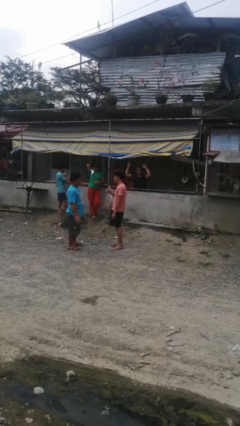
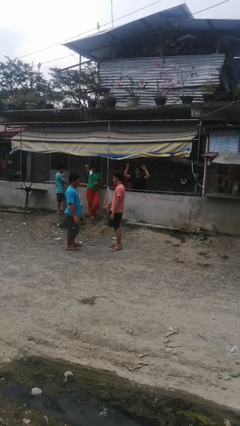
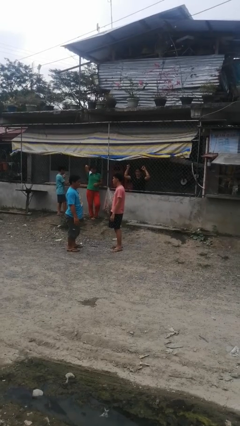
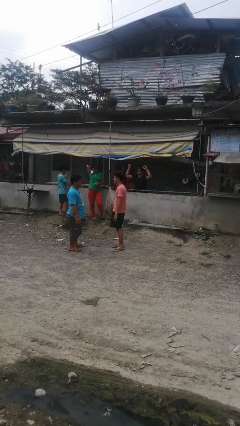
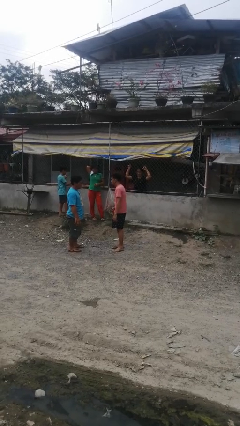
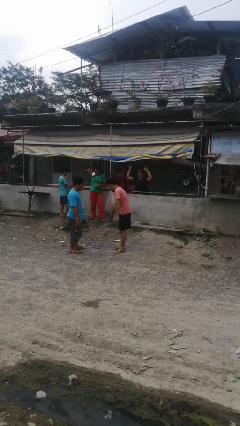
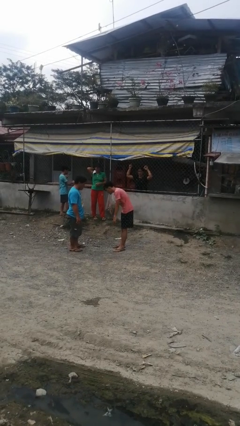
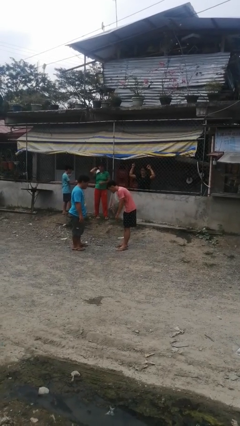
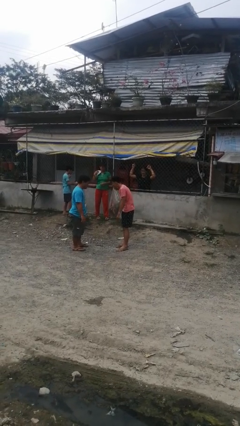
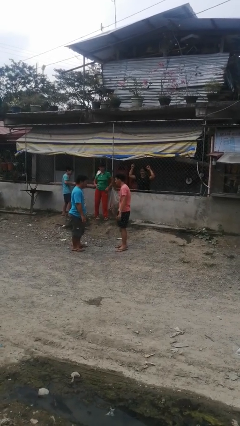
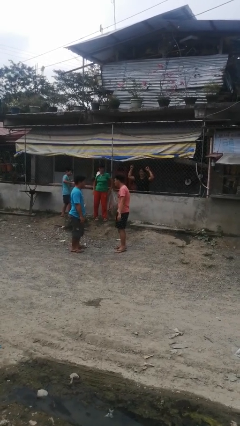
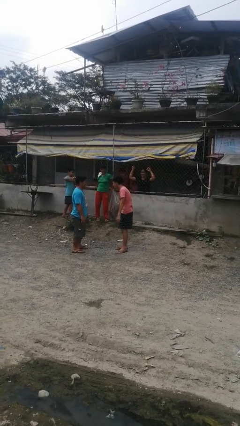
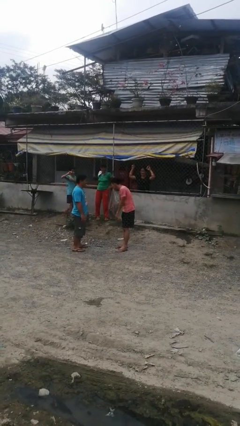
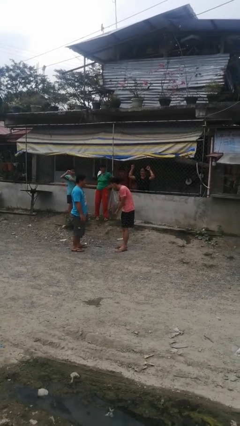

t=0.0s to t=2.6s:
person laughs with person

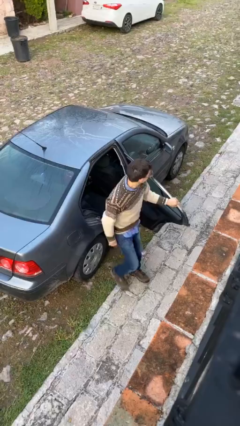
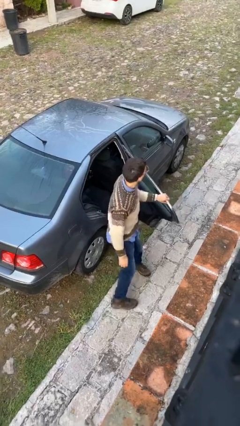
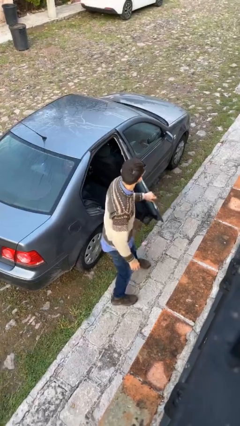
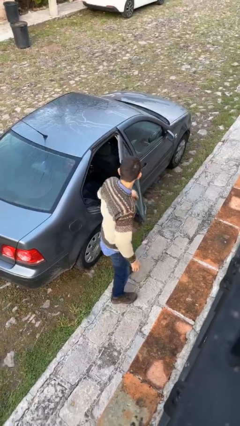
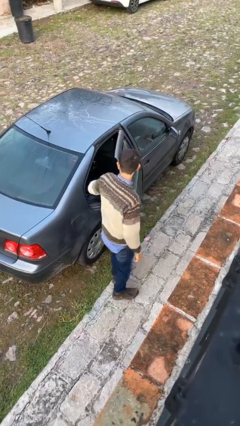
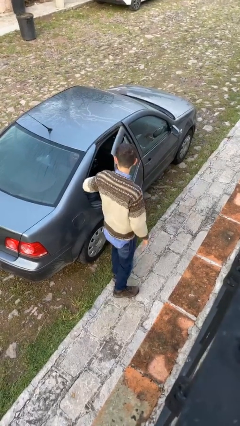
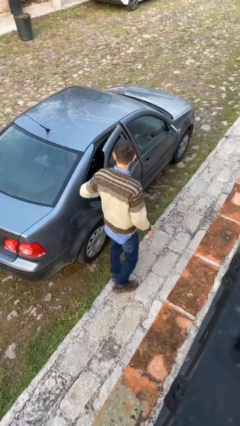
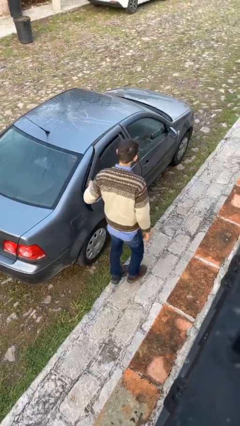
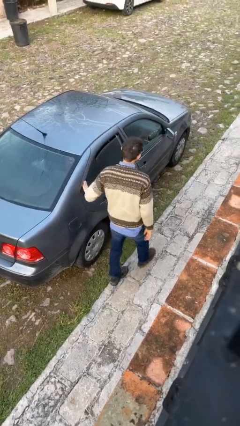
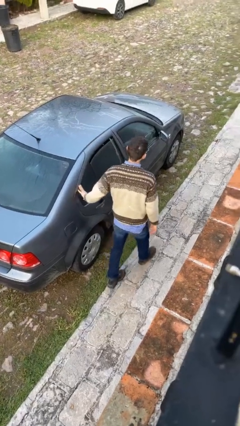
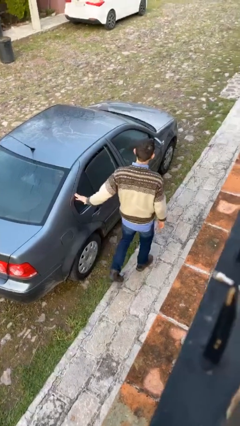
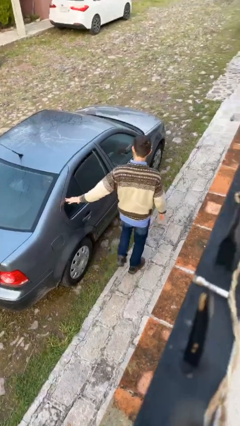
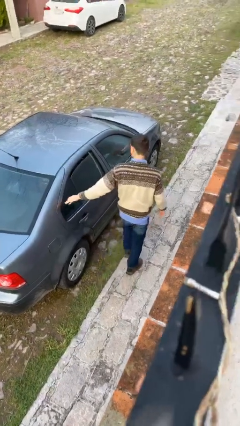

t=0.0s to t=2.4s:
person closes car door

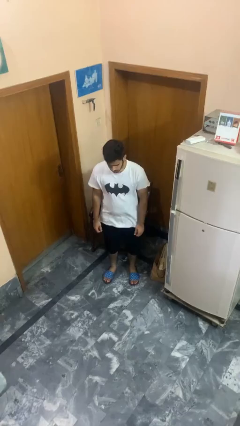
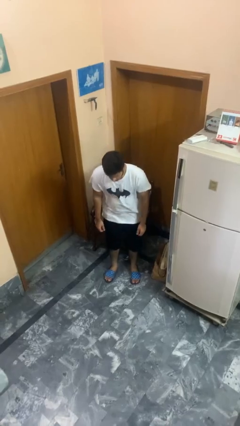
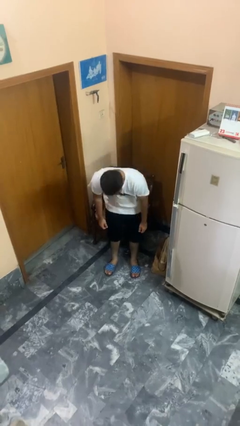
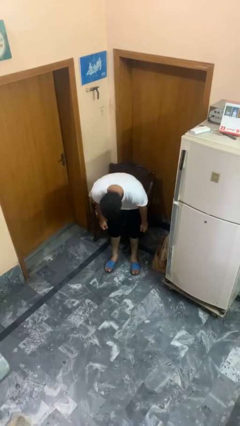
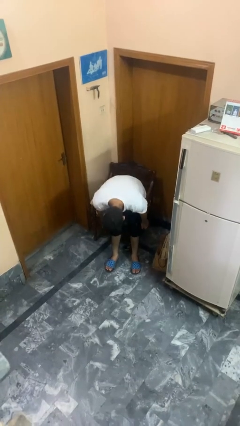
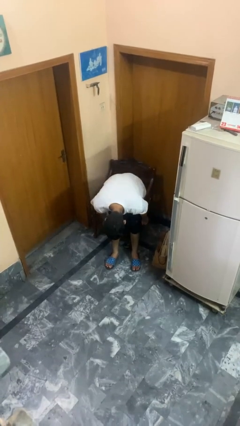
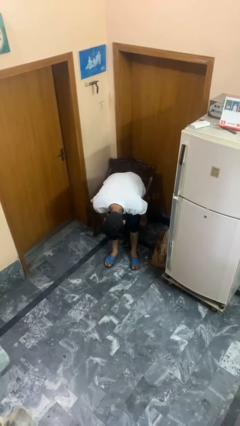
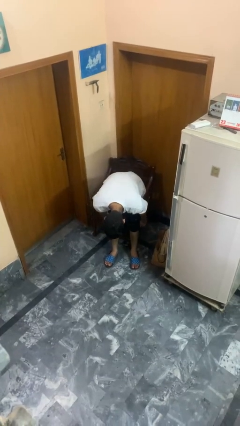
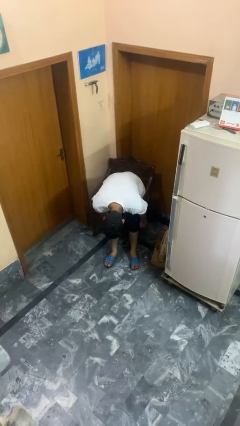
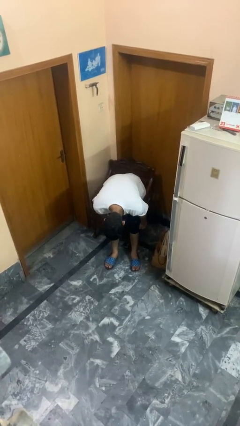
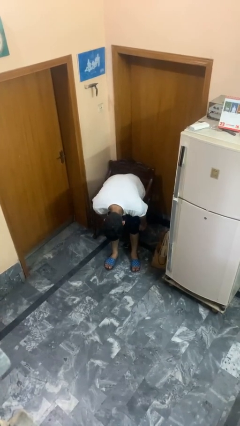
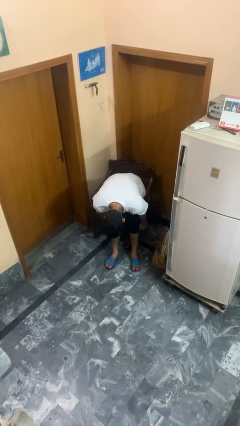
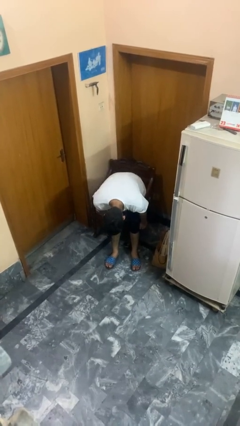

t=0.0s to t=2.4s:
person bows

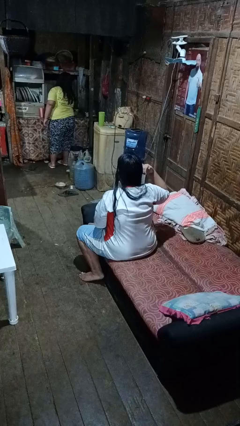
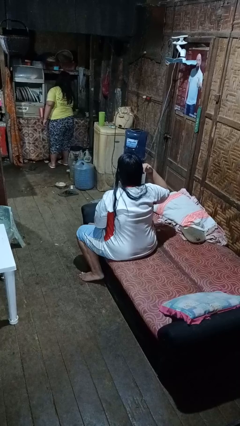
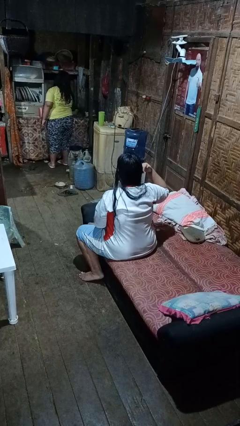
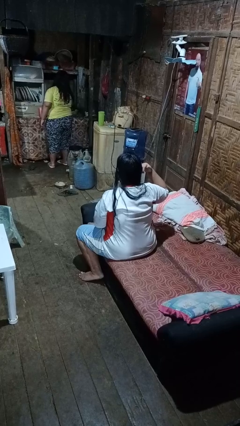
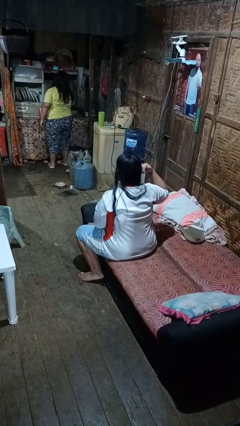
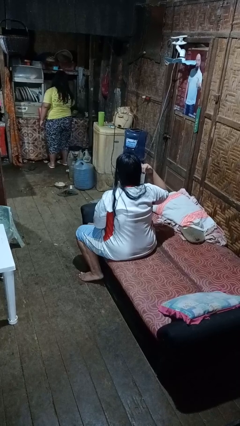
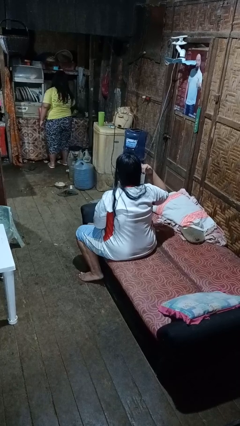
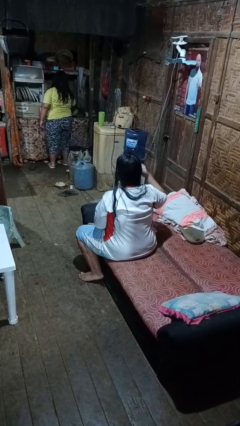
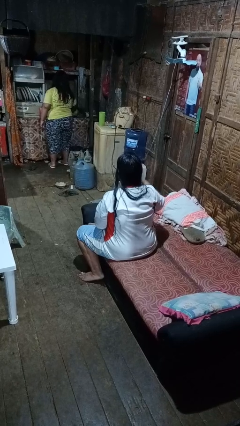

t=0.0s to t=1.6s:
person gestures call me

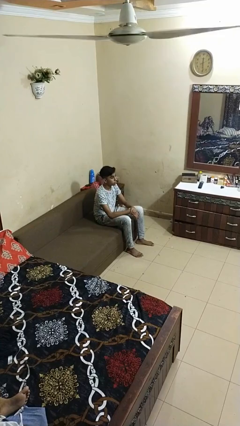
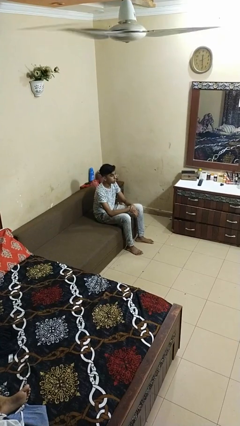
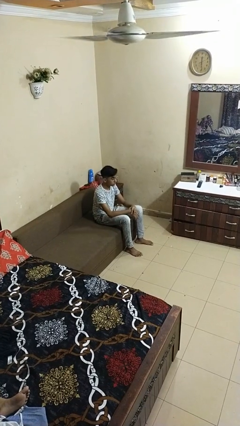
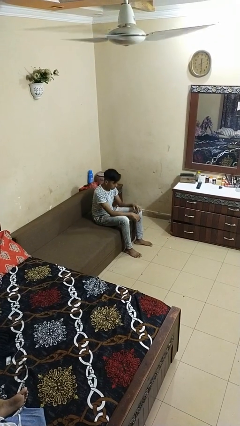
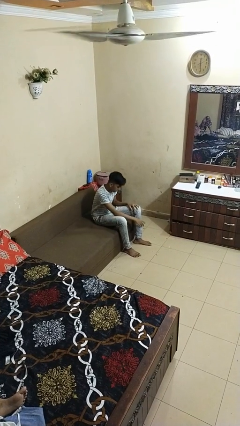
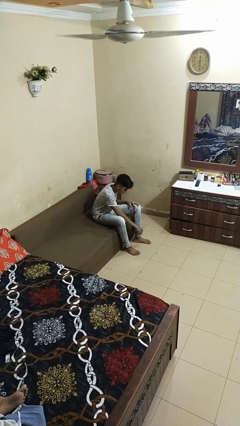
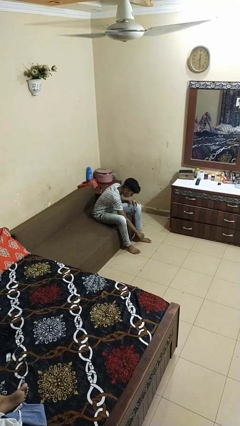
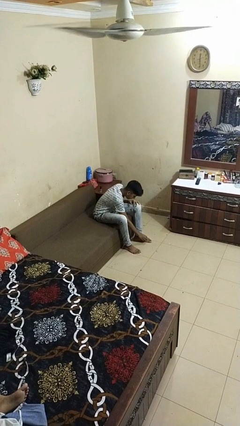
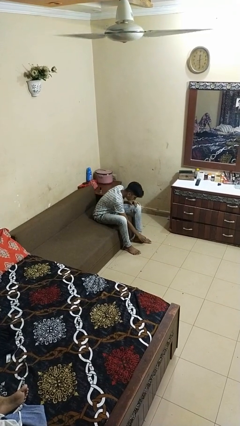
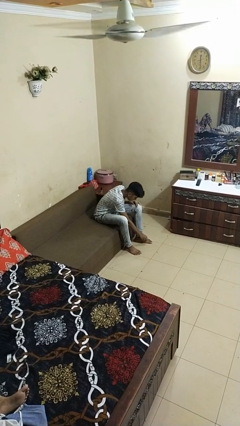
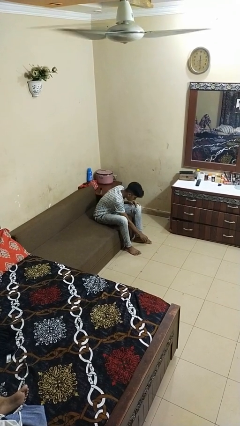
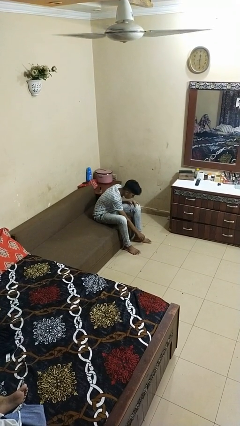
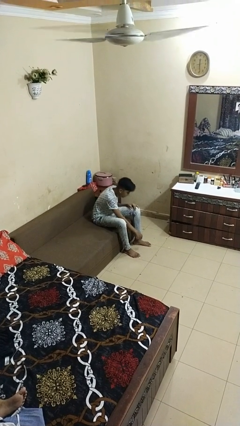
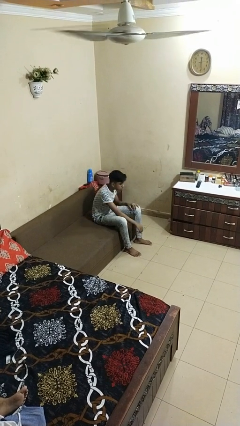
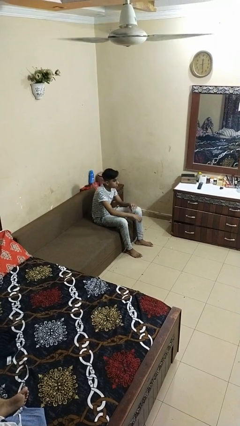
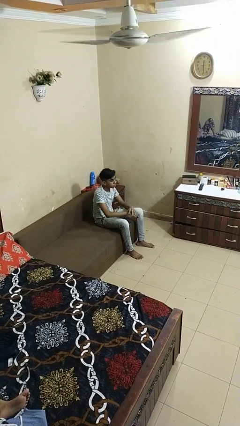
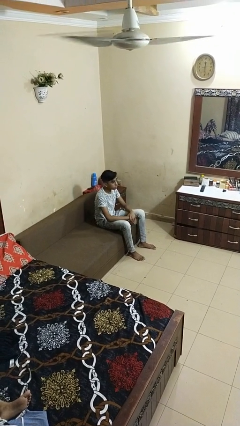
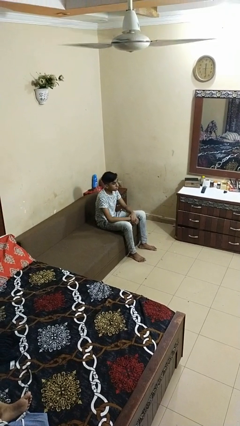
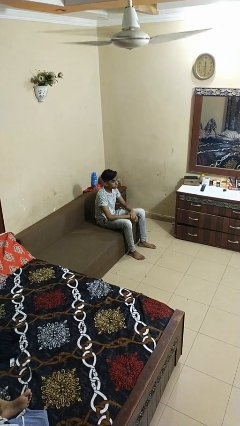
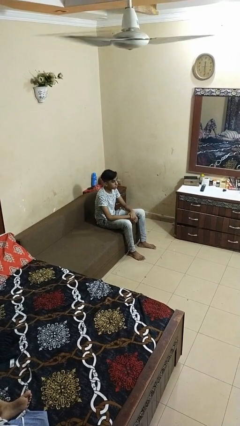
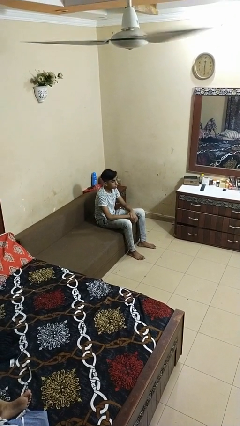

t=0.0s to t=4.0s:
person rubs foot

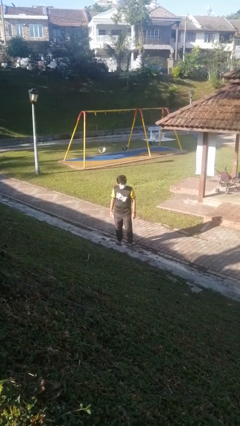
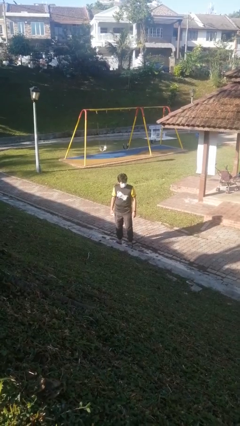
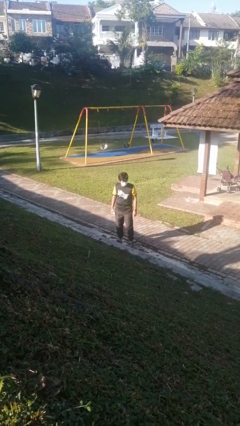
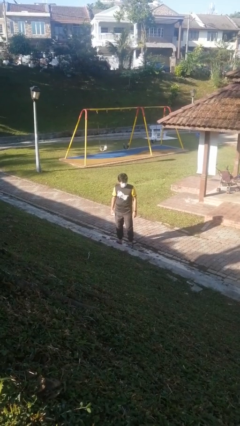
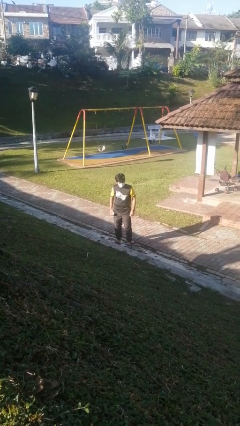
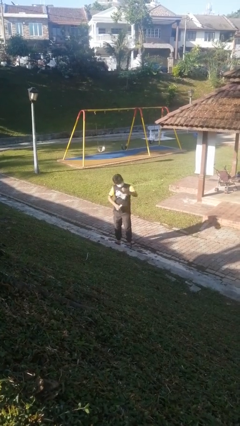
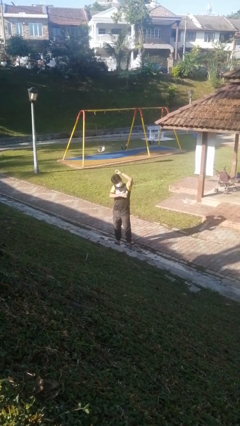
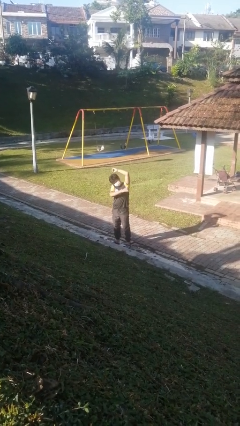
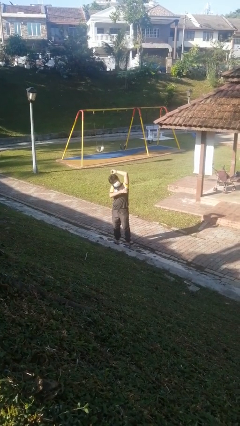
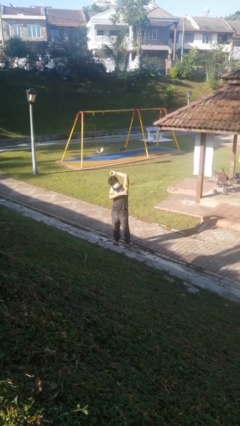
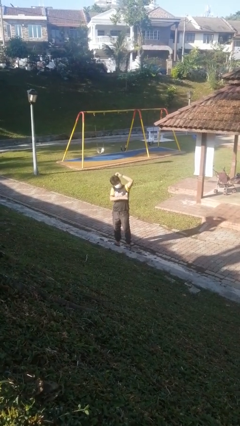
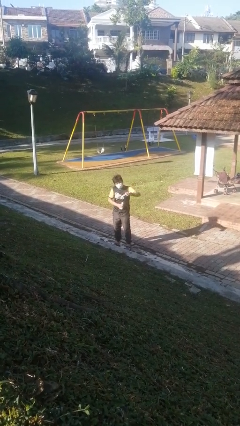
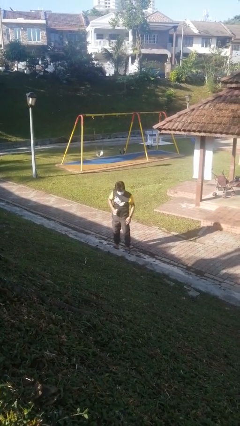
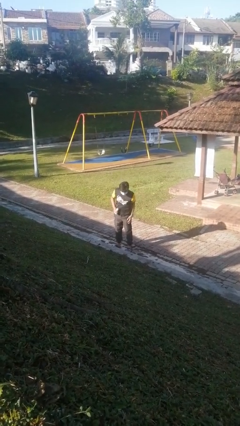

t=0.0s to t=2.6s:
person applies deodorant

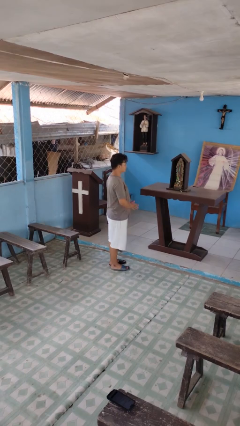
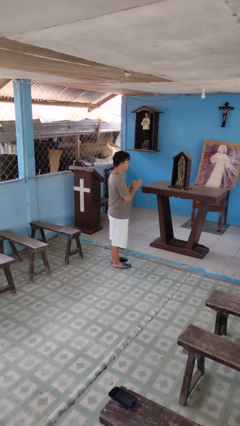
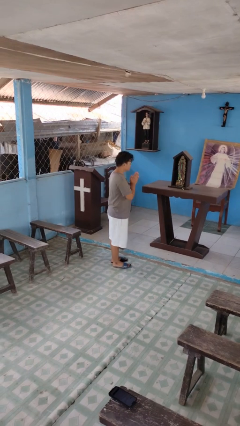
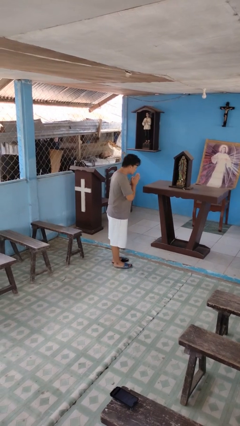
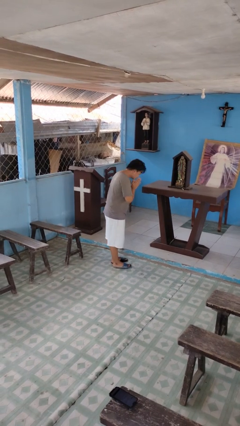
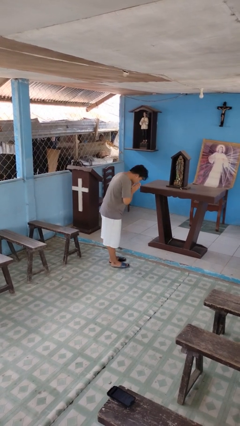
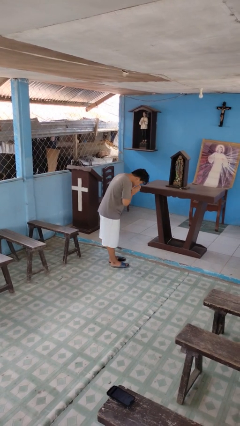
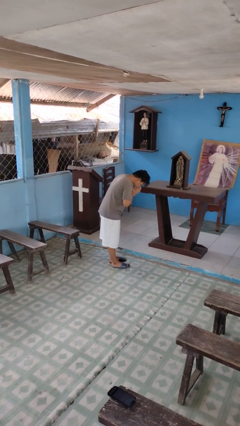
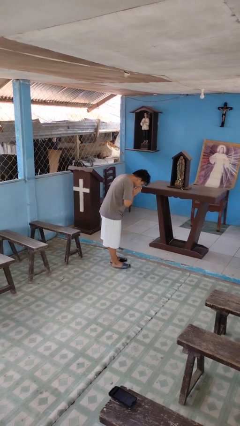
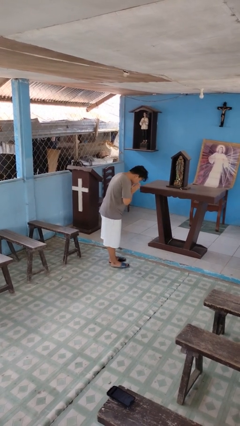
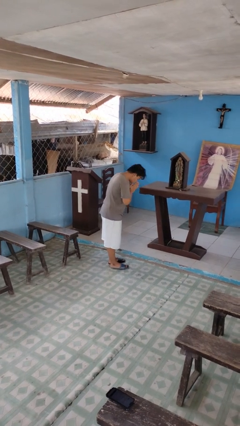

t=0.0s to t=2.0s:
person prays

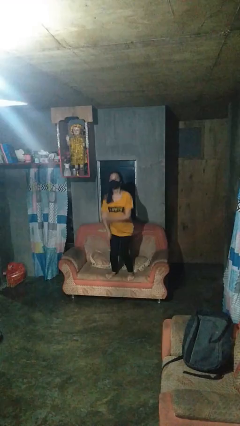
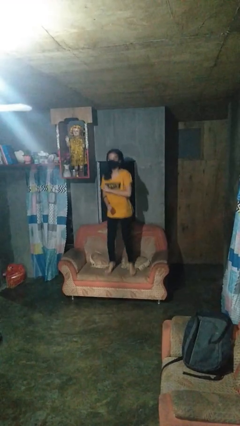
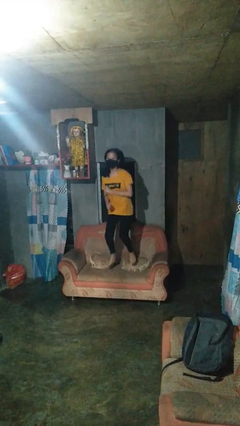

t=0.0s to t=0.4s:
person jumps on couch
